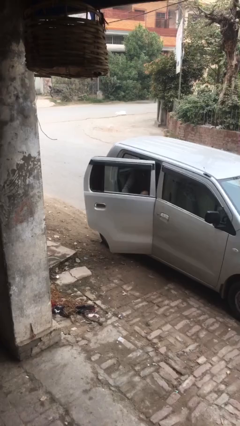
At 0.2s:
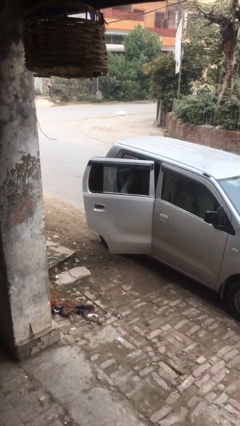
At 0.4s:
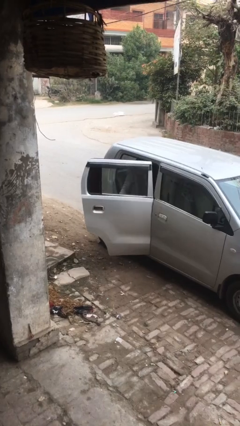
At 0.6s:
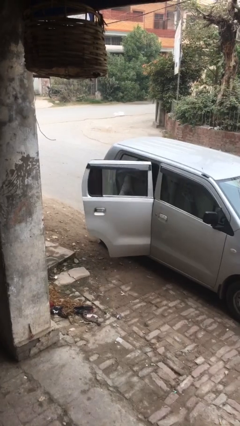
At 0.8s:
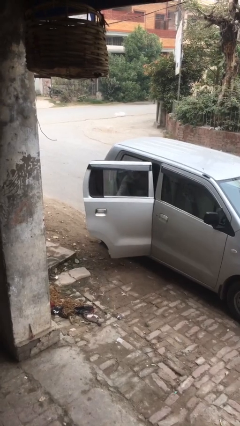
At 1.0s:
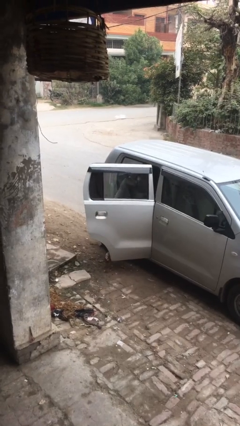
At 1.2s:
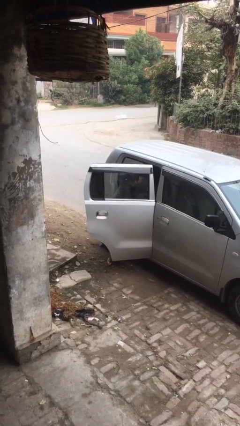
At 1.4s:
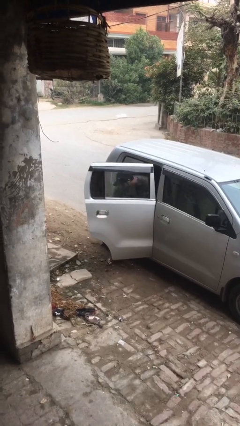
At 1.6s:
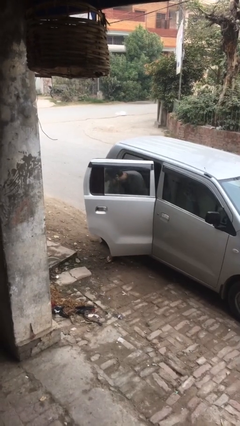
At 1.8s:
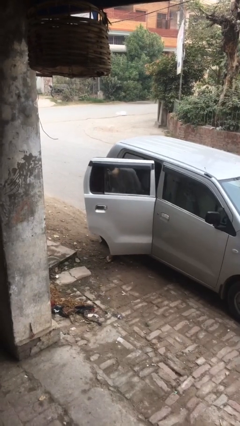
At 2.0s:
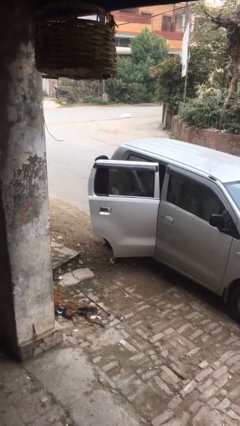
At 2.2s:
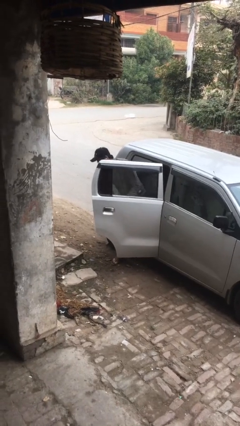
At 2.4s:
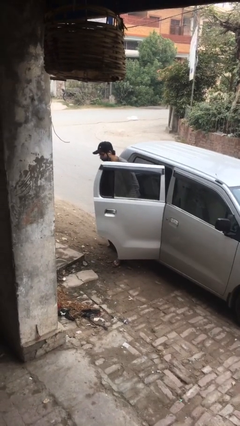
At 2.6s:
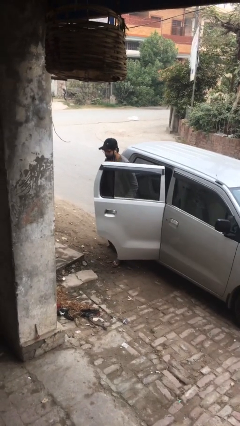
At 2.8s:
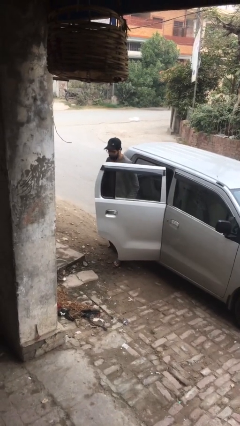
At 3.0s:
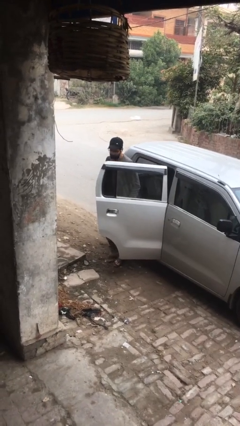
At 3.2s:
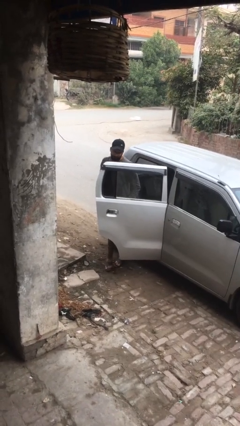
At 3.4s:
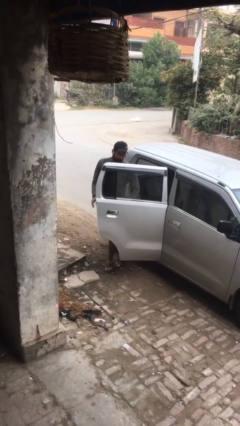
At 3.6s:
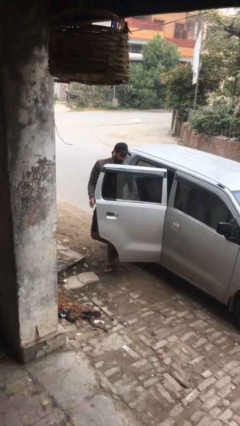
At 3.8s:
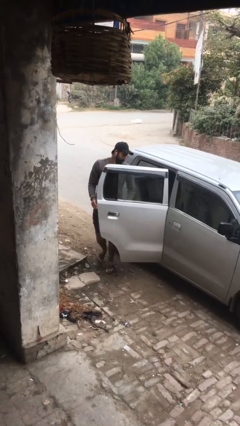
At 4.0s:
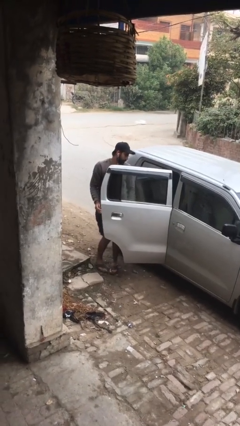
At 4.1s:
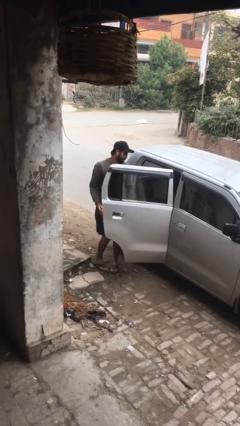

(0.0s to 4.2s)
person exits car

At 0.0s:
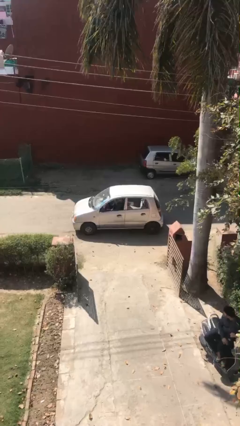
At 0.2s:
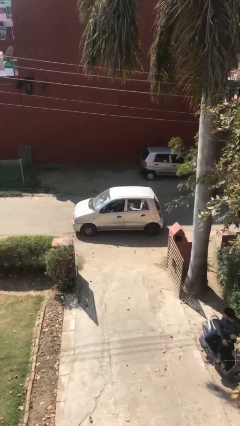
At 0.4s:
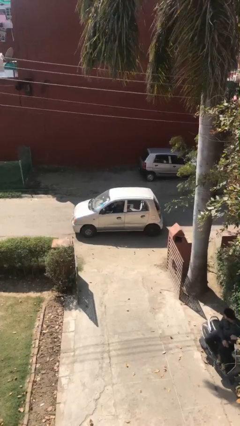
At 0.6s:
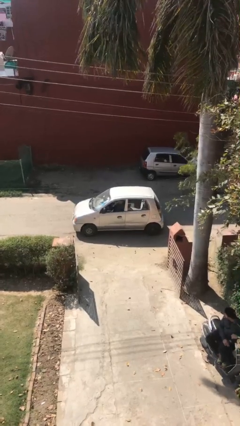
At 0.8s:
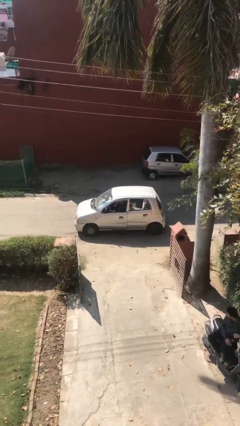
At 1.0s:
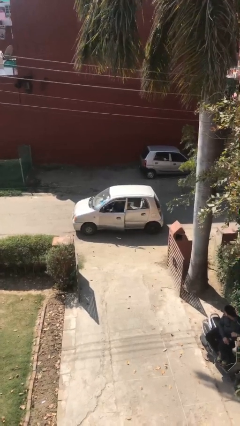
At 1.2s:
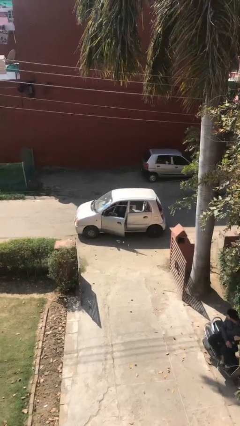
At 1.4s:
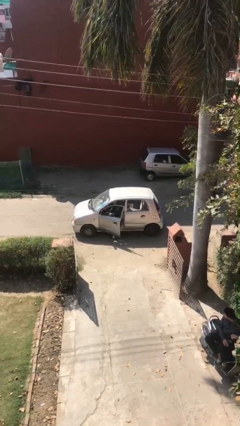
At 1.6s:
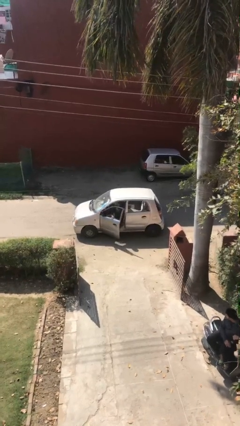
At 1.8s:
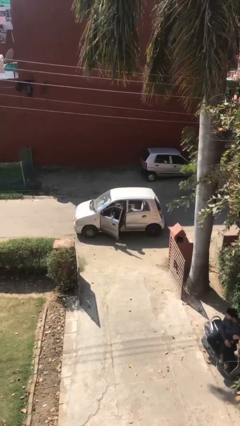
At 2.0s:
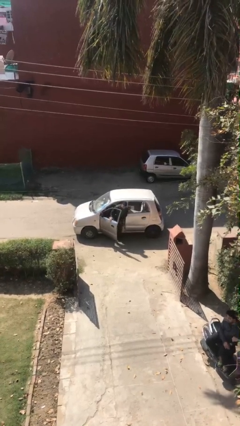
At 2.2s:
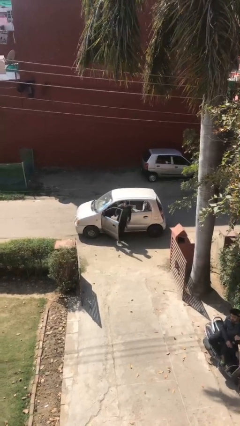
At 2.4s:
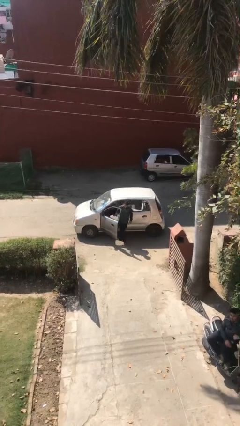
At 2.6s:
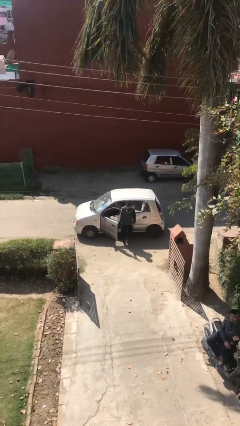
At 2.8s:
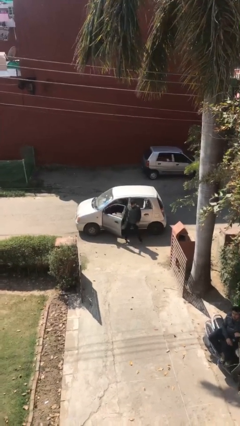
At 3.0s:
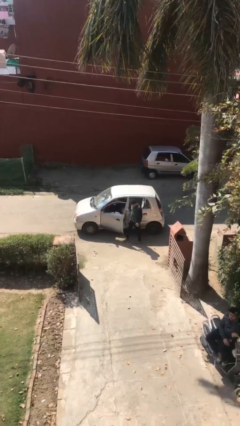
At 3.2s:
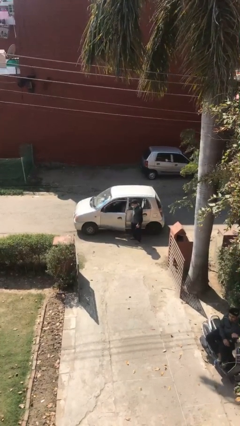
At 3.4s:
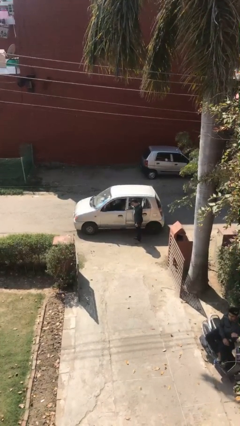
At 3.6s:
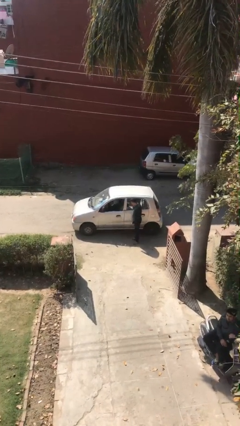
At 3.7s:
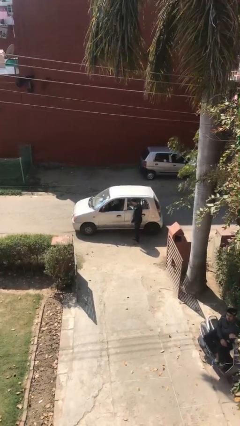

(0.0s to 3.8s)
car drops off person

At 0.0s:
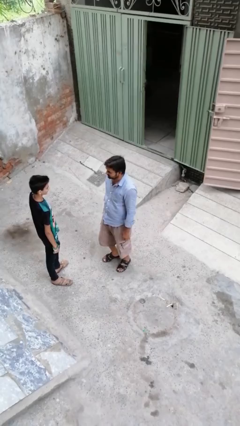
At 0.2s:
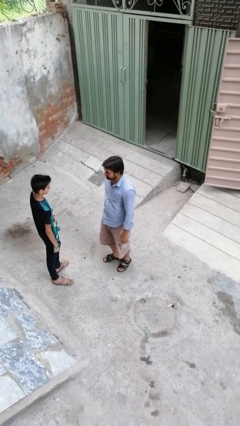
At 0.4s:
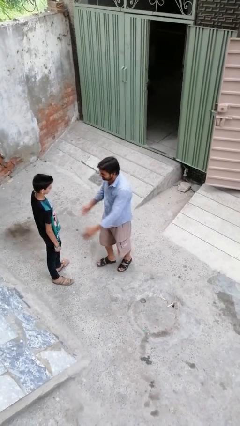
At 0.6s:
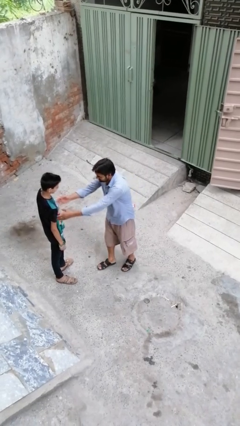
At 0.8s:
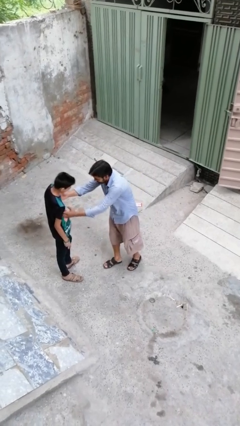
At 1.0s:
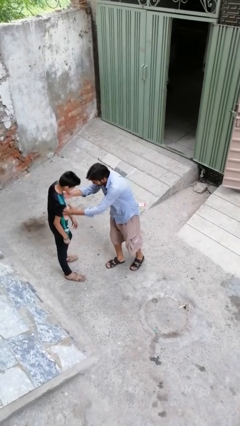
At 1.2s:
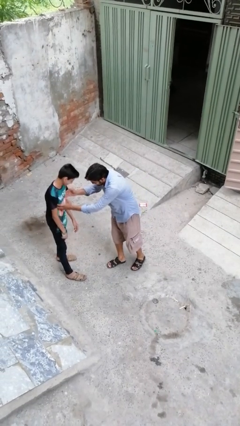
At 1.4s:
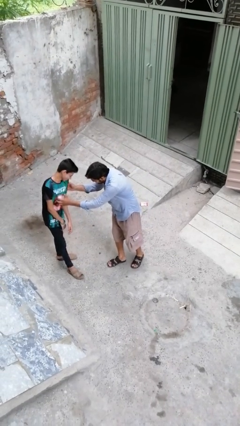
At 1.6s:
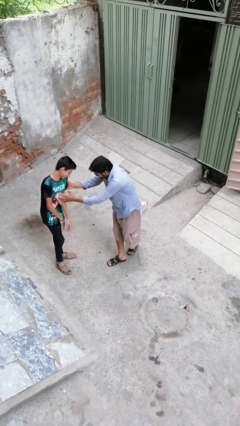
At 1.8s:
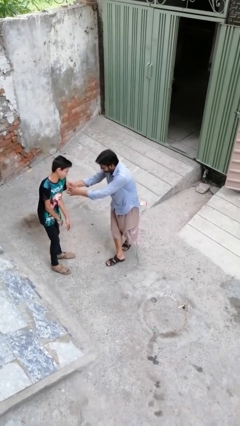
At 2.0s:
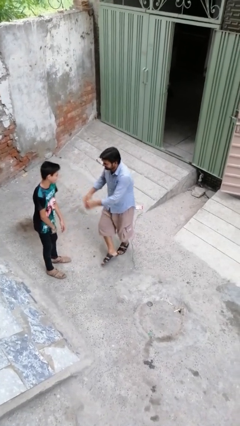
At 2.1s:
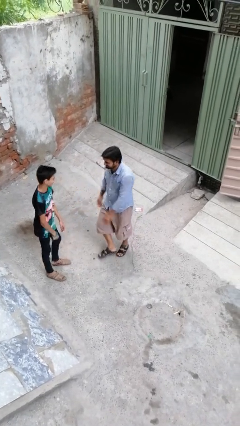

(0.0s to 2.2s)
person tickles person

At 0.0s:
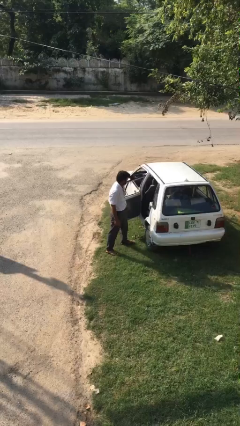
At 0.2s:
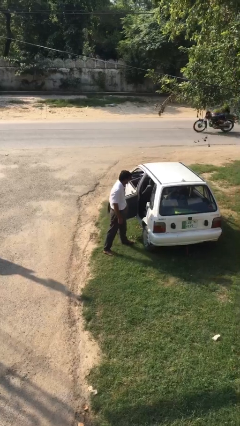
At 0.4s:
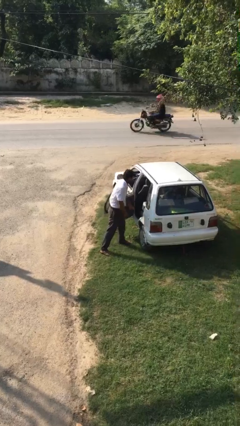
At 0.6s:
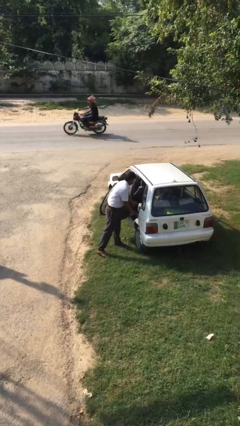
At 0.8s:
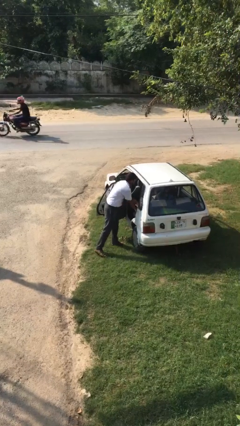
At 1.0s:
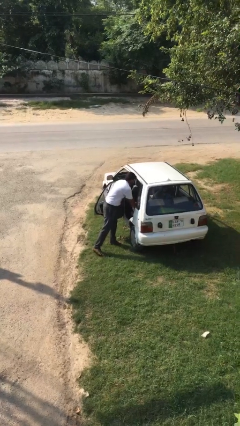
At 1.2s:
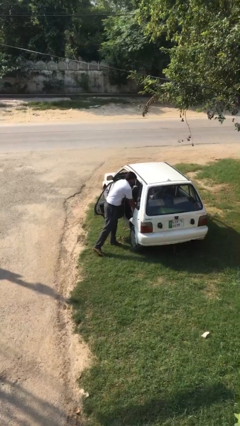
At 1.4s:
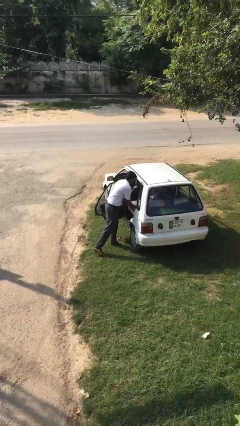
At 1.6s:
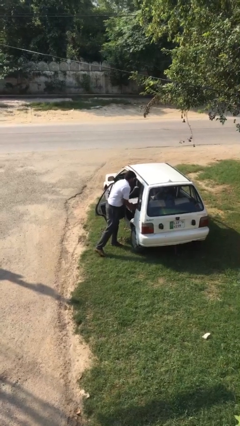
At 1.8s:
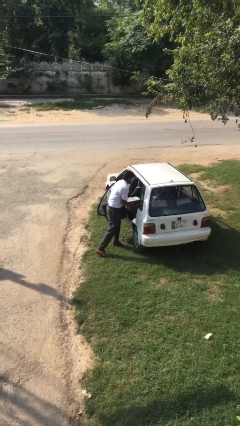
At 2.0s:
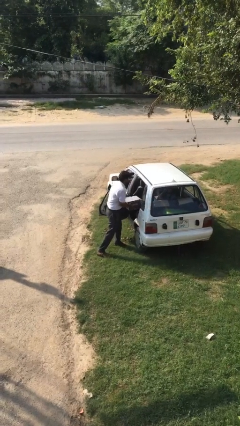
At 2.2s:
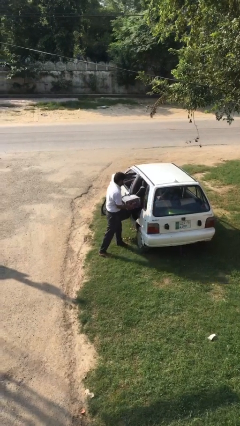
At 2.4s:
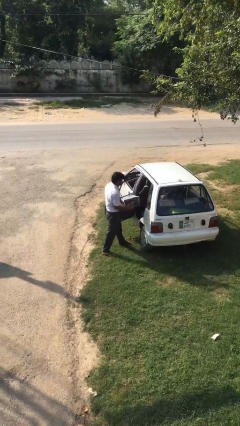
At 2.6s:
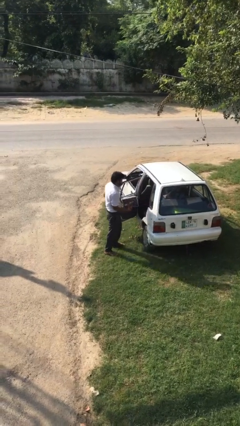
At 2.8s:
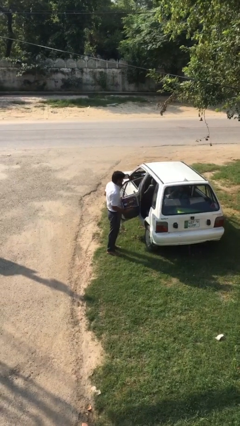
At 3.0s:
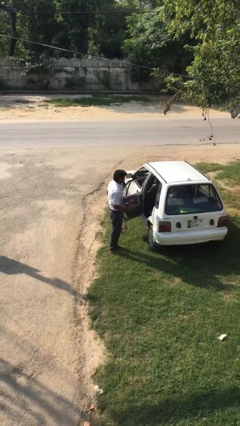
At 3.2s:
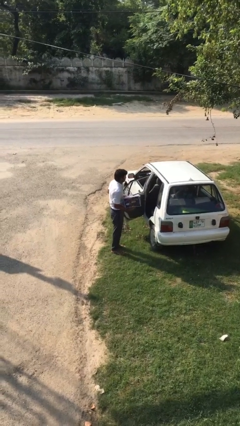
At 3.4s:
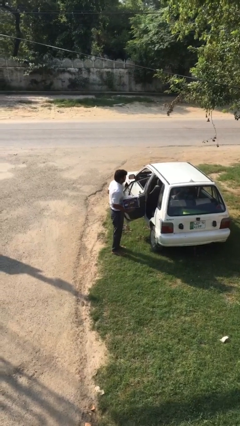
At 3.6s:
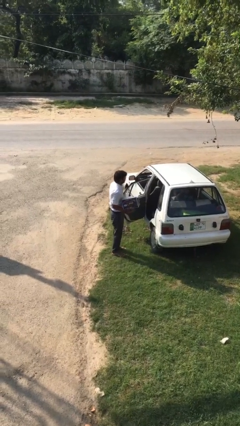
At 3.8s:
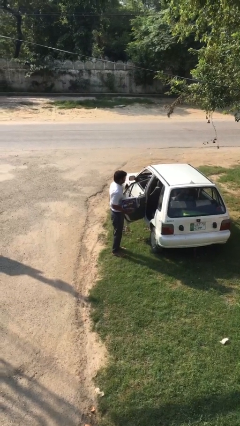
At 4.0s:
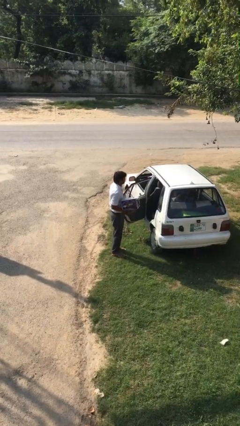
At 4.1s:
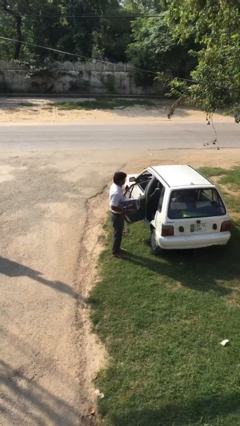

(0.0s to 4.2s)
person unloads car

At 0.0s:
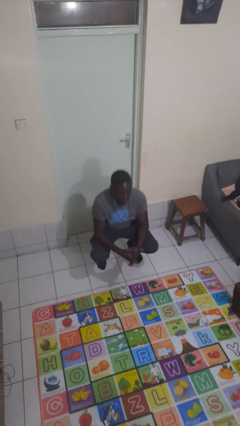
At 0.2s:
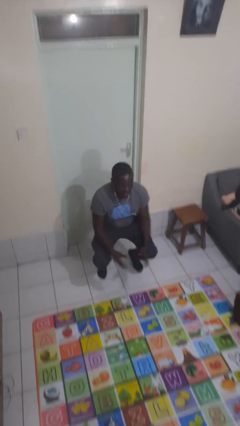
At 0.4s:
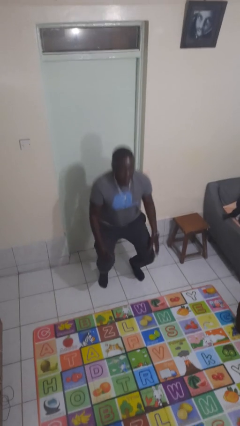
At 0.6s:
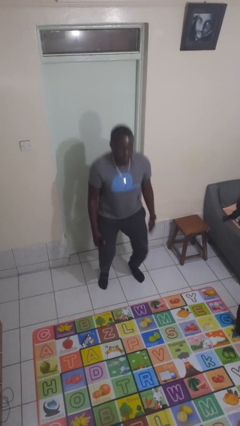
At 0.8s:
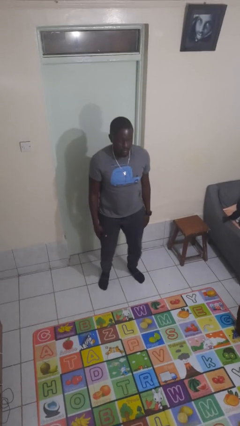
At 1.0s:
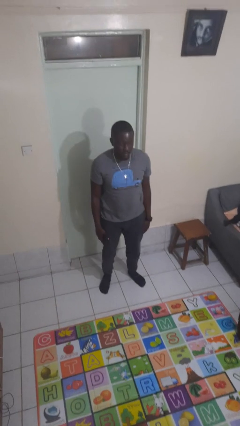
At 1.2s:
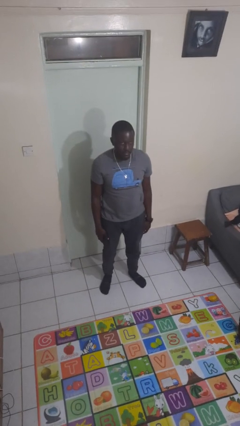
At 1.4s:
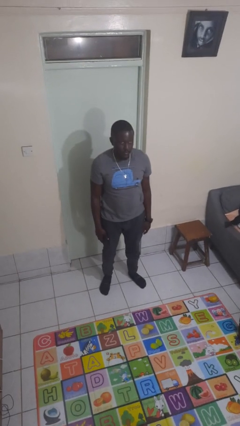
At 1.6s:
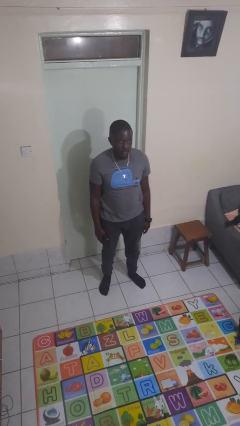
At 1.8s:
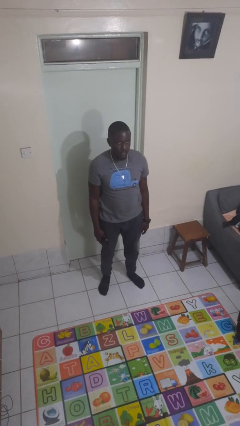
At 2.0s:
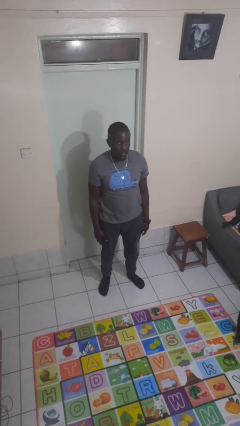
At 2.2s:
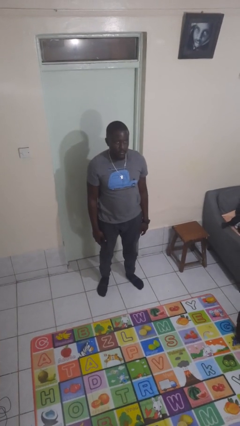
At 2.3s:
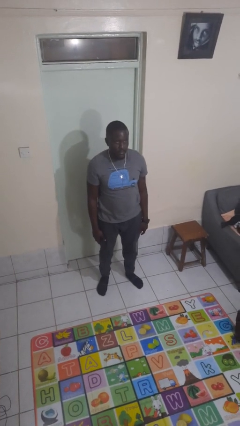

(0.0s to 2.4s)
person stands up

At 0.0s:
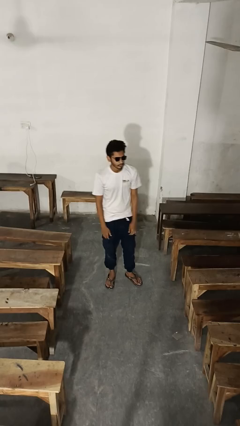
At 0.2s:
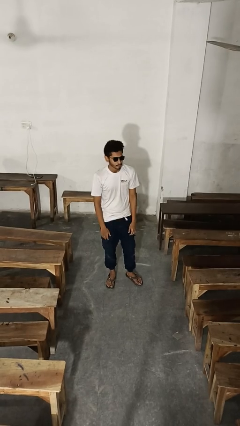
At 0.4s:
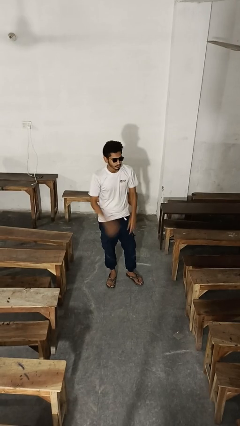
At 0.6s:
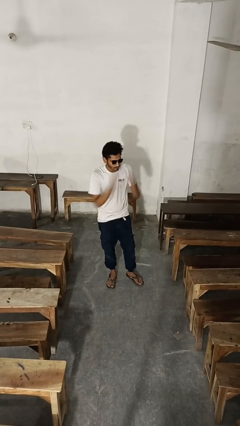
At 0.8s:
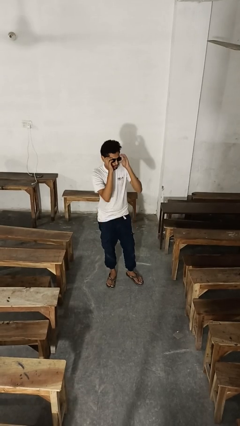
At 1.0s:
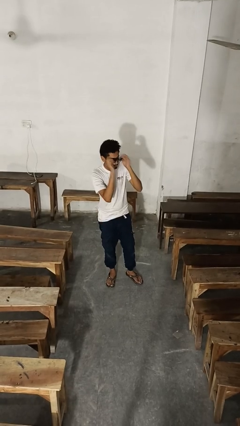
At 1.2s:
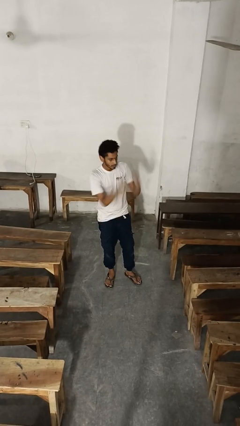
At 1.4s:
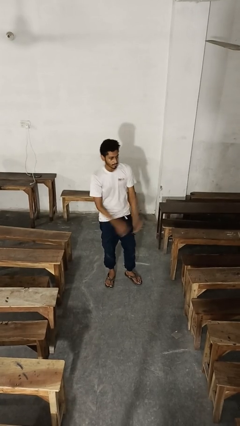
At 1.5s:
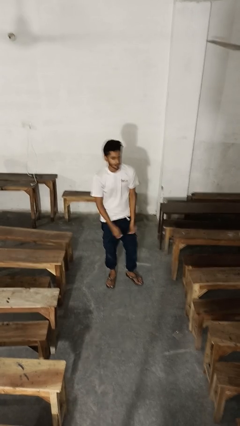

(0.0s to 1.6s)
person takes off sunglasses
